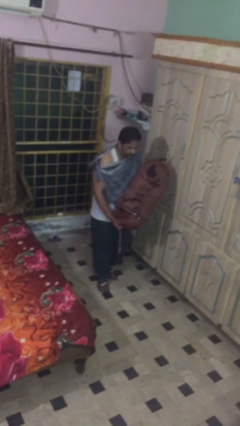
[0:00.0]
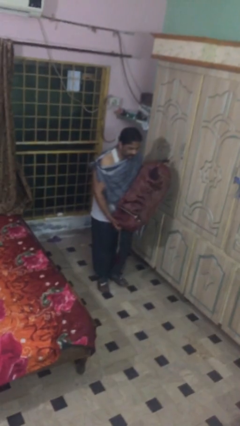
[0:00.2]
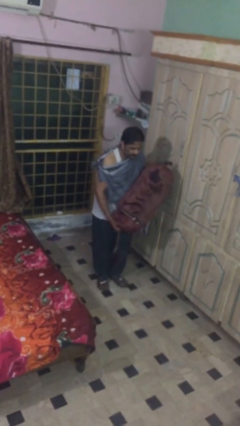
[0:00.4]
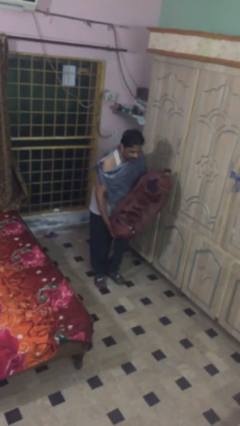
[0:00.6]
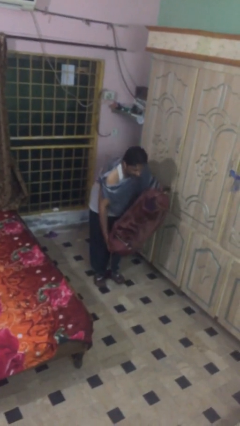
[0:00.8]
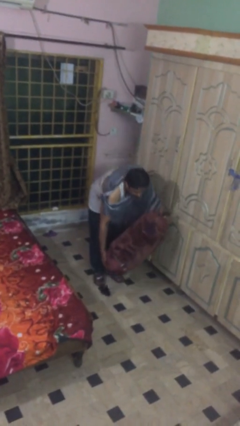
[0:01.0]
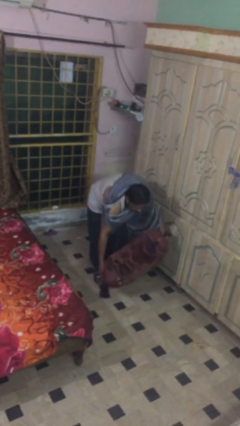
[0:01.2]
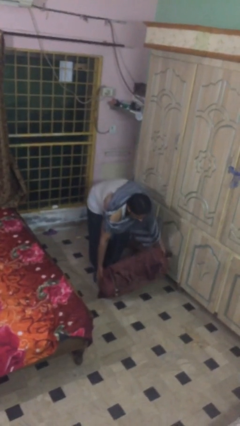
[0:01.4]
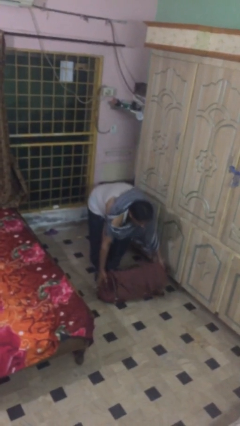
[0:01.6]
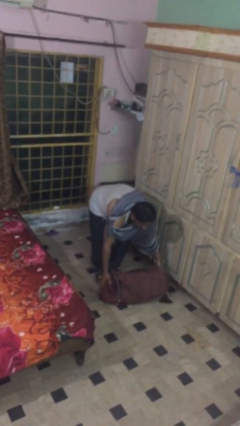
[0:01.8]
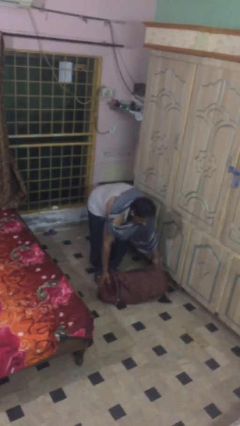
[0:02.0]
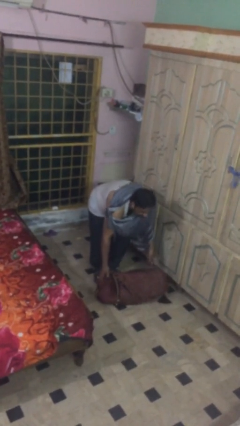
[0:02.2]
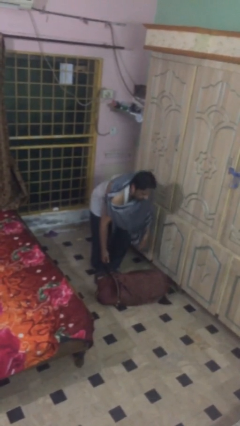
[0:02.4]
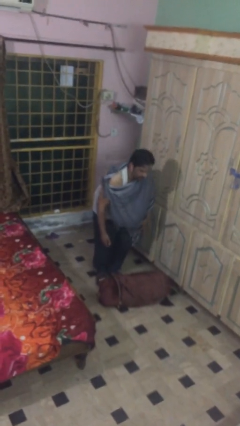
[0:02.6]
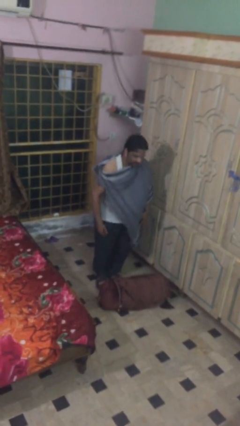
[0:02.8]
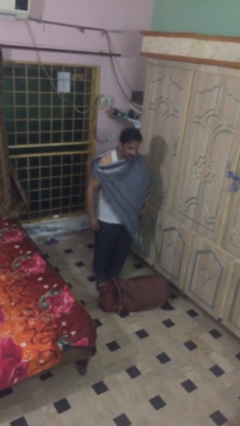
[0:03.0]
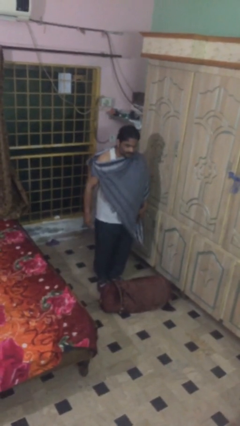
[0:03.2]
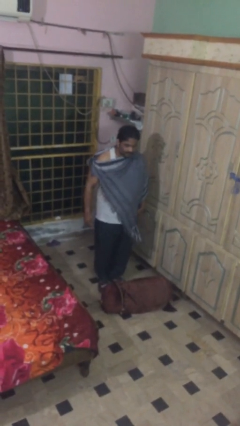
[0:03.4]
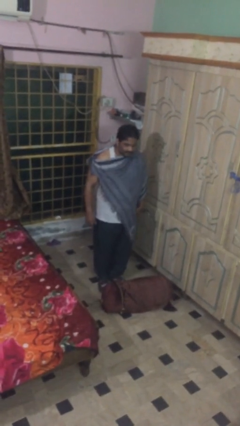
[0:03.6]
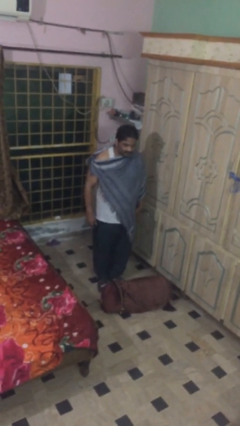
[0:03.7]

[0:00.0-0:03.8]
person puts down object on floor

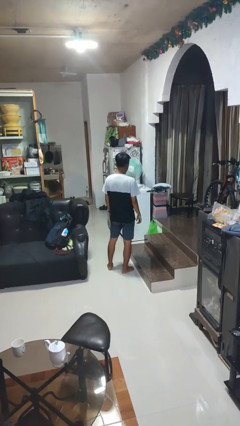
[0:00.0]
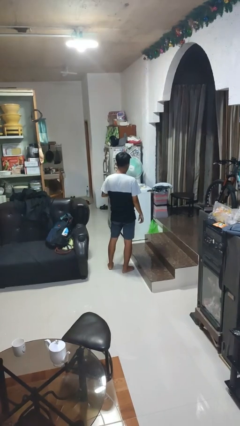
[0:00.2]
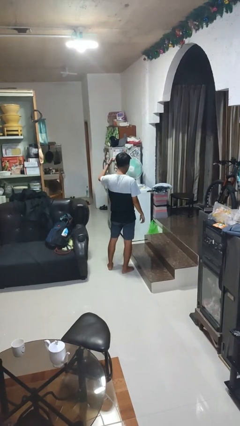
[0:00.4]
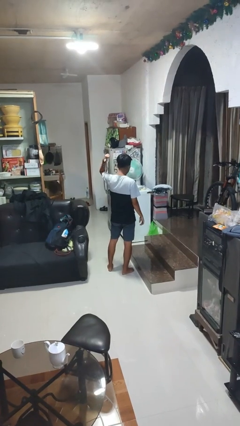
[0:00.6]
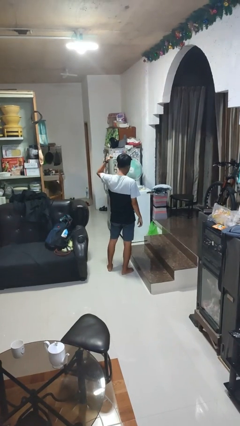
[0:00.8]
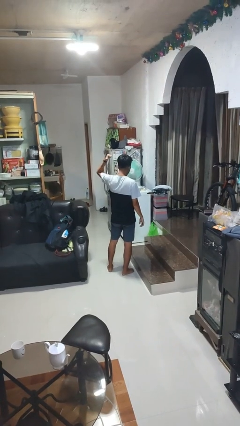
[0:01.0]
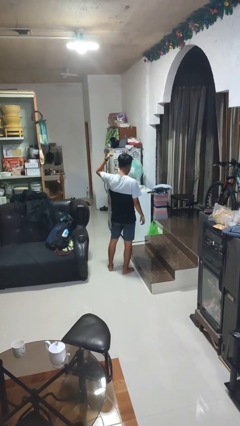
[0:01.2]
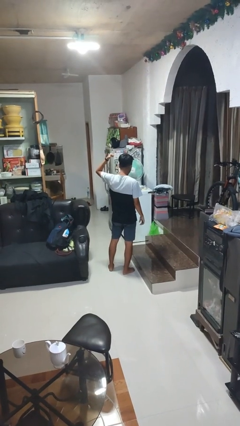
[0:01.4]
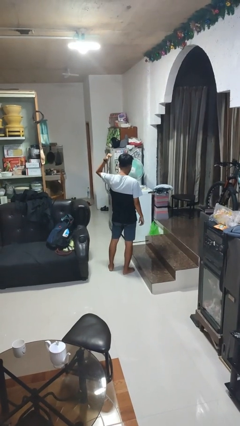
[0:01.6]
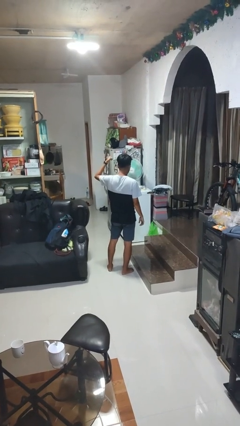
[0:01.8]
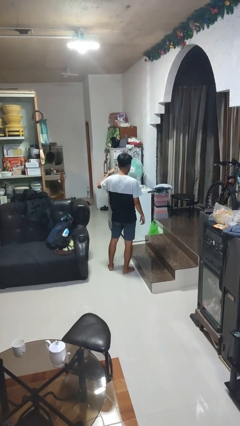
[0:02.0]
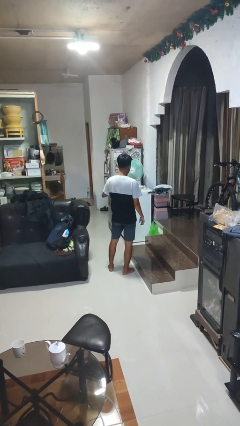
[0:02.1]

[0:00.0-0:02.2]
person gestures behind me

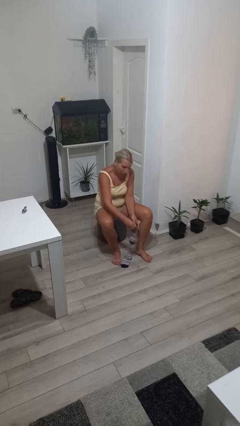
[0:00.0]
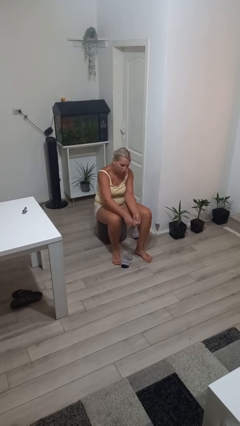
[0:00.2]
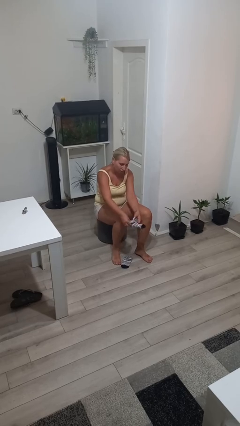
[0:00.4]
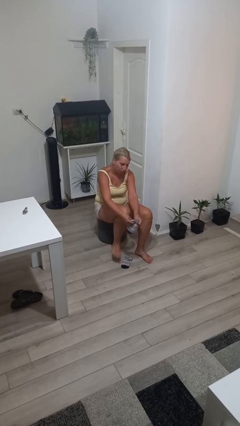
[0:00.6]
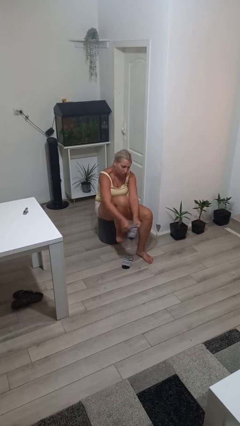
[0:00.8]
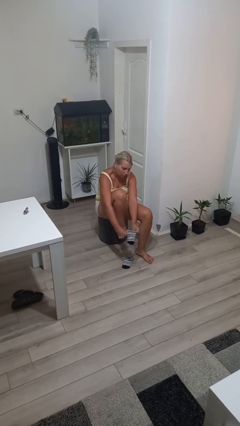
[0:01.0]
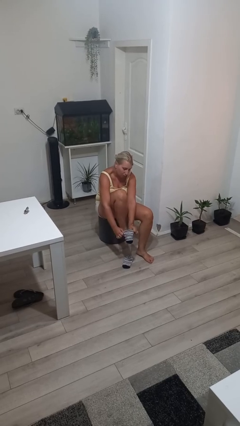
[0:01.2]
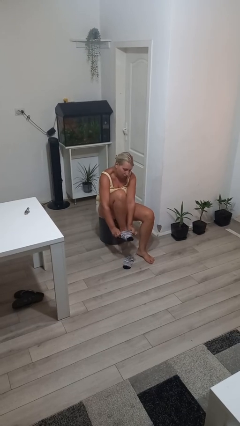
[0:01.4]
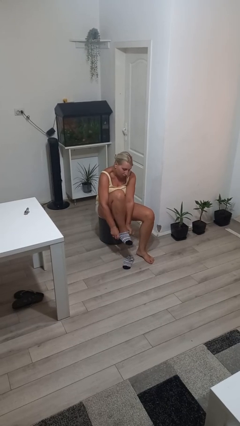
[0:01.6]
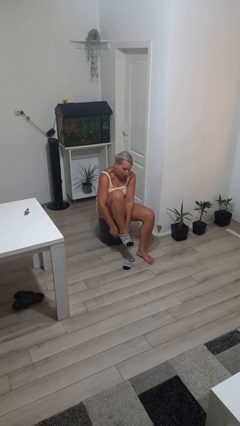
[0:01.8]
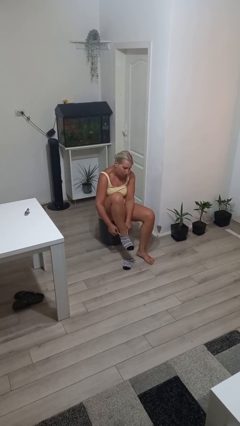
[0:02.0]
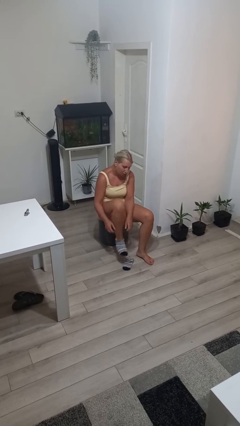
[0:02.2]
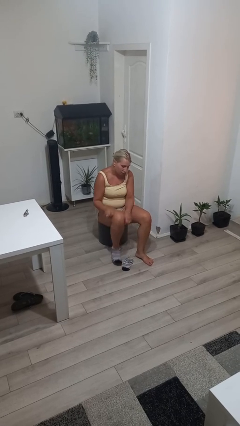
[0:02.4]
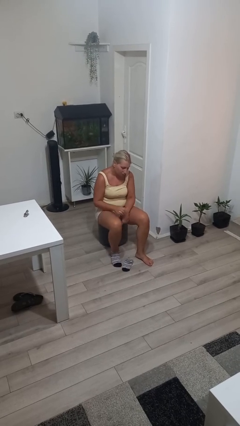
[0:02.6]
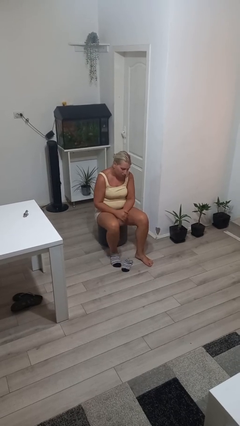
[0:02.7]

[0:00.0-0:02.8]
person puts on socks

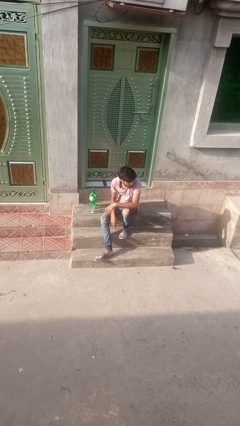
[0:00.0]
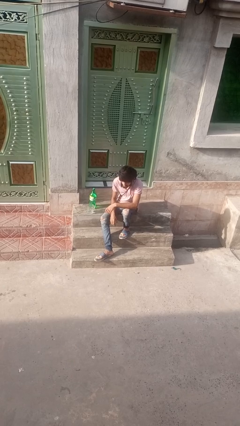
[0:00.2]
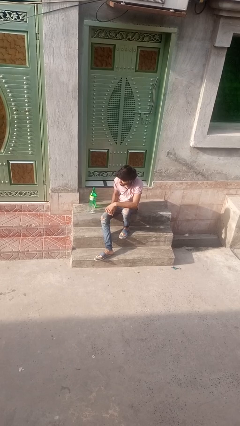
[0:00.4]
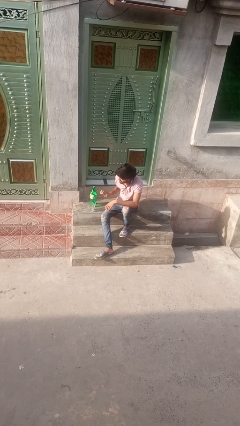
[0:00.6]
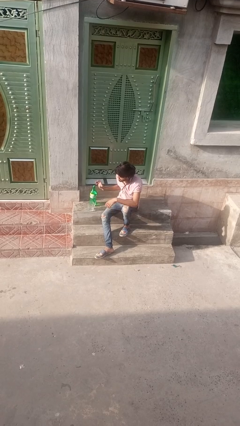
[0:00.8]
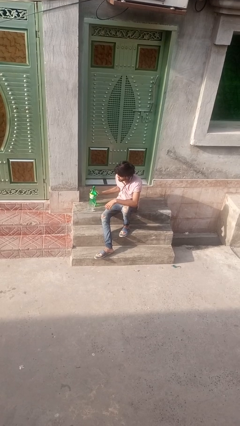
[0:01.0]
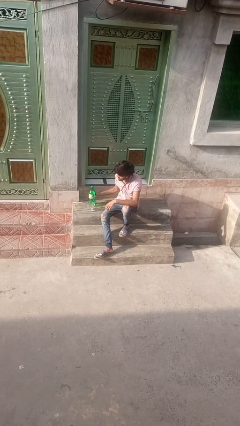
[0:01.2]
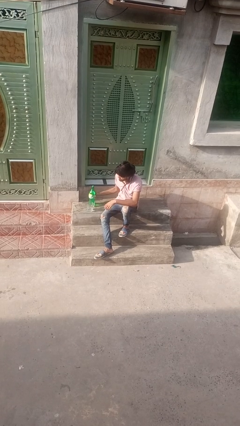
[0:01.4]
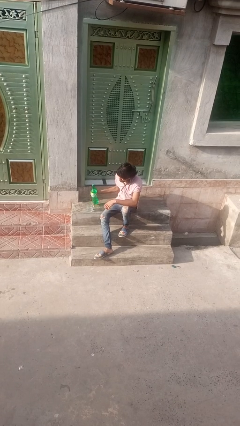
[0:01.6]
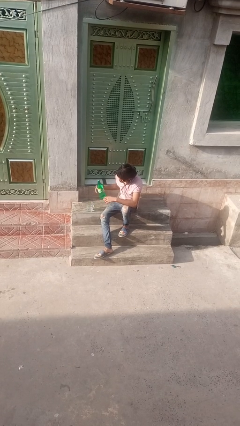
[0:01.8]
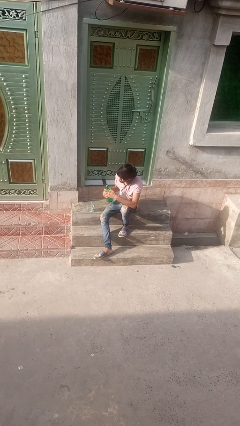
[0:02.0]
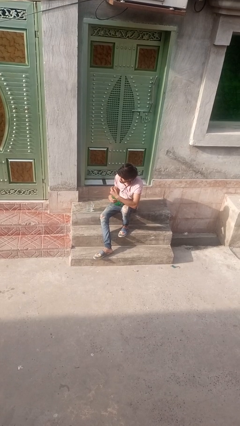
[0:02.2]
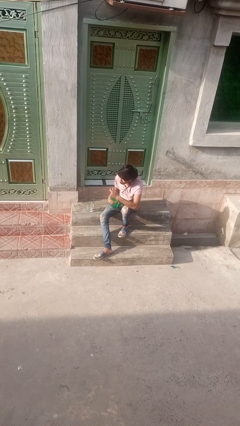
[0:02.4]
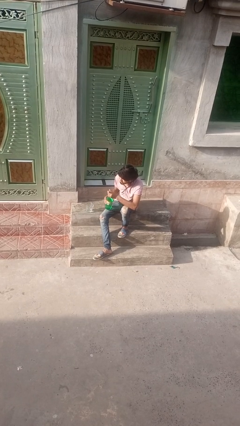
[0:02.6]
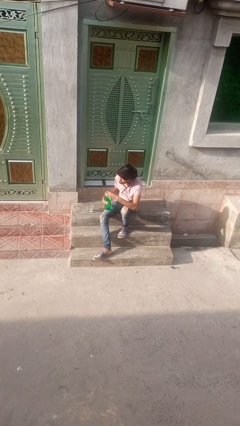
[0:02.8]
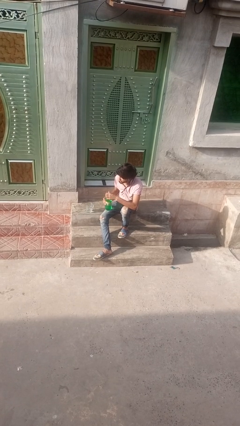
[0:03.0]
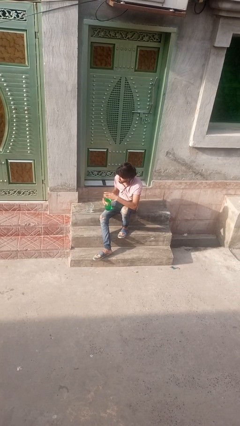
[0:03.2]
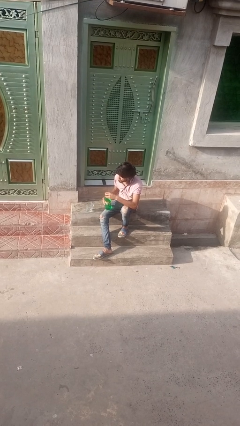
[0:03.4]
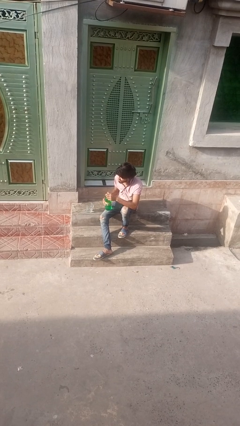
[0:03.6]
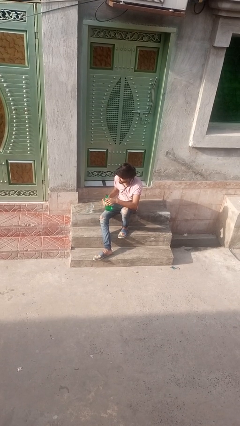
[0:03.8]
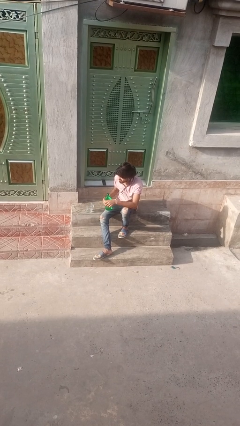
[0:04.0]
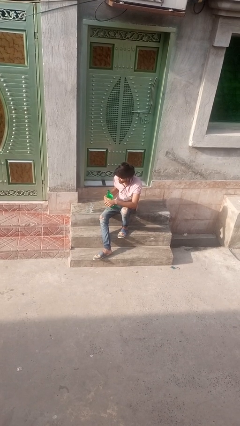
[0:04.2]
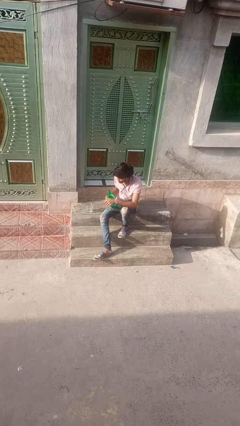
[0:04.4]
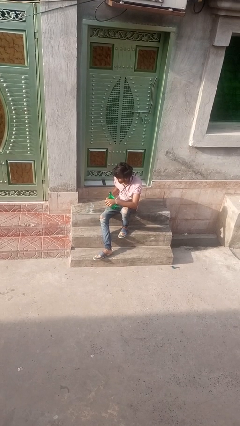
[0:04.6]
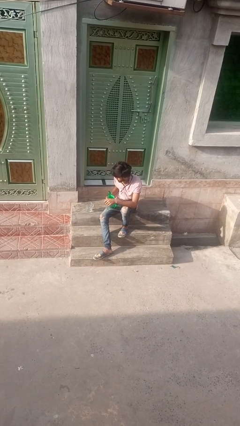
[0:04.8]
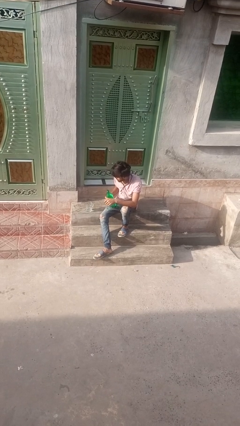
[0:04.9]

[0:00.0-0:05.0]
person unscrews lid from bottle

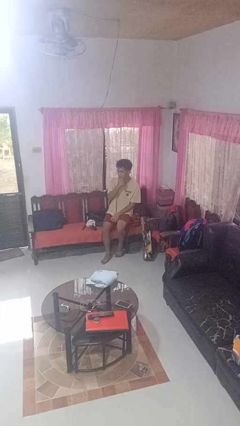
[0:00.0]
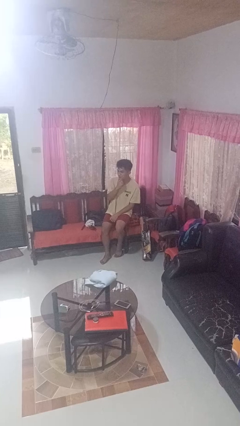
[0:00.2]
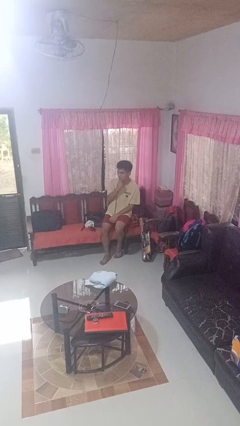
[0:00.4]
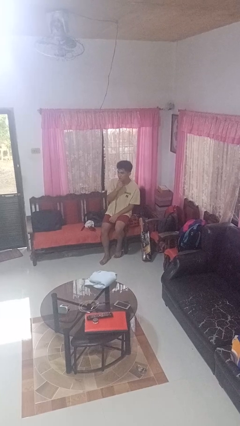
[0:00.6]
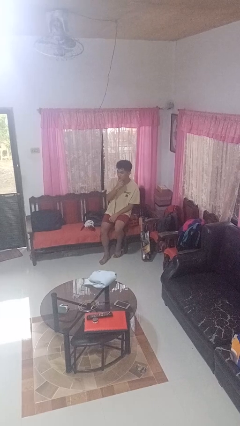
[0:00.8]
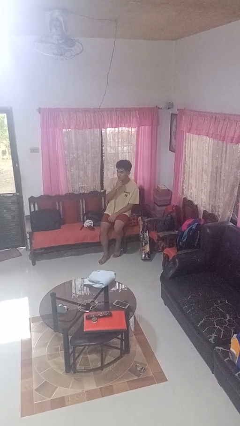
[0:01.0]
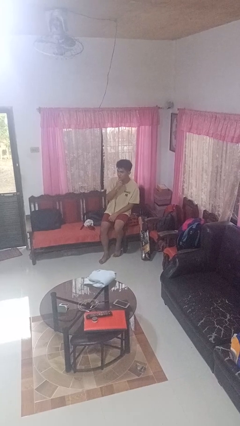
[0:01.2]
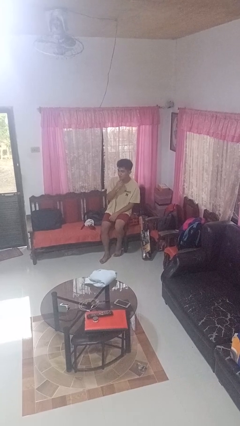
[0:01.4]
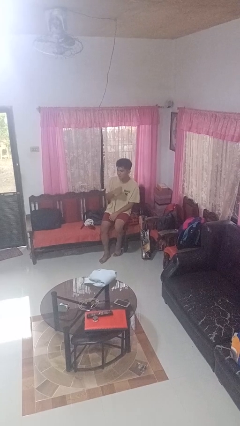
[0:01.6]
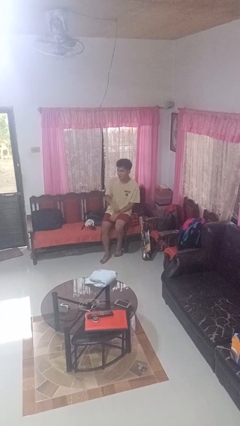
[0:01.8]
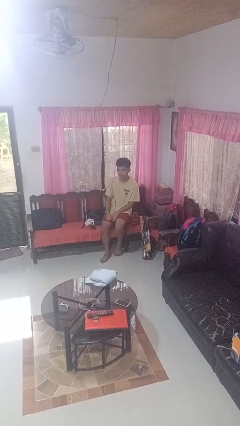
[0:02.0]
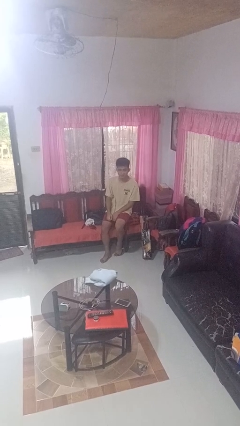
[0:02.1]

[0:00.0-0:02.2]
person strokes chin

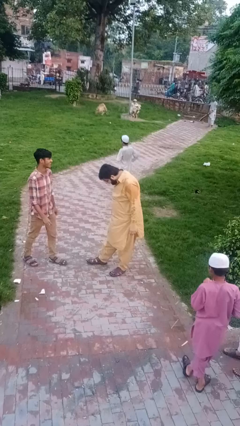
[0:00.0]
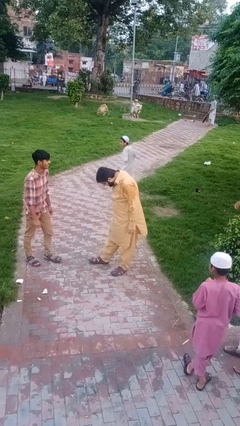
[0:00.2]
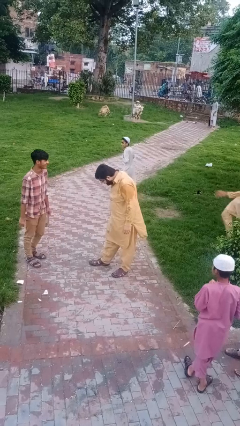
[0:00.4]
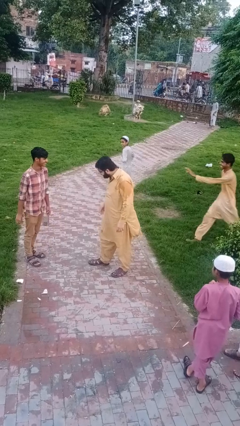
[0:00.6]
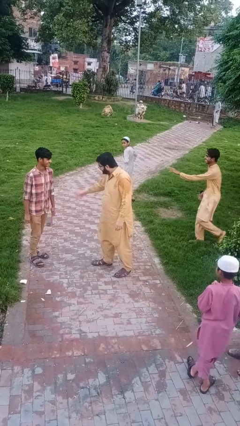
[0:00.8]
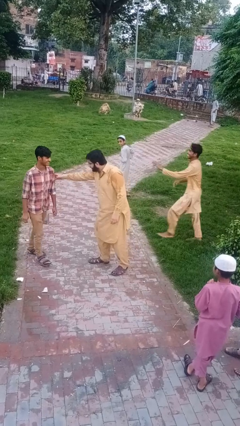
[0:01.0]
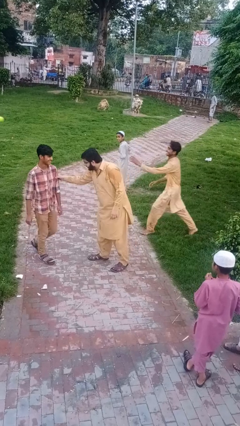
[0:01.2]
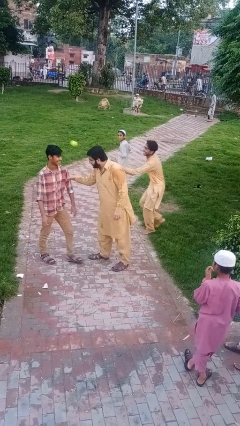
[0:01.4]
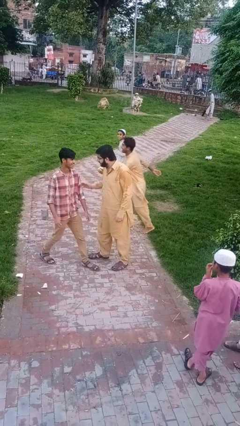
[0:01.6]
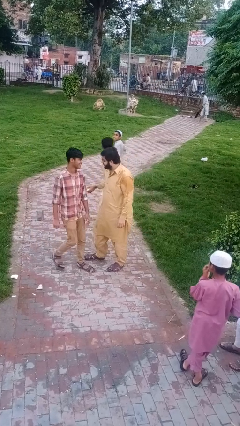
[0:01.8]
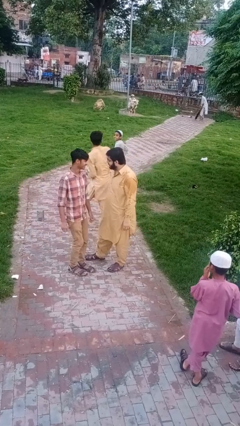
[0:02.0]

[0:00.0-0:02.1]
person grabs person by bicep
